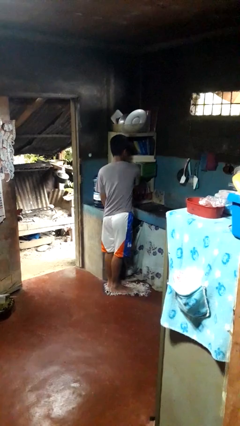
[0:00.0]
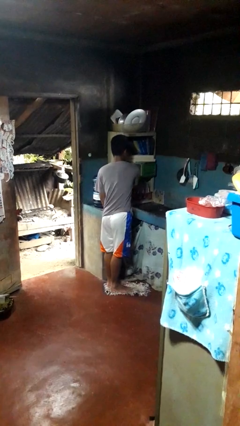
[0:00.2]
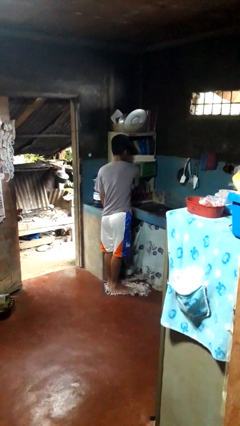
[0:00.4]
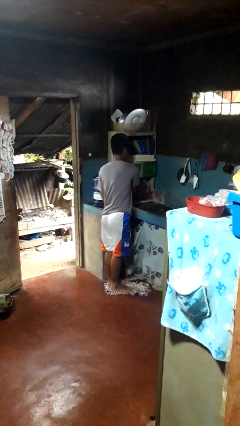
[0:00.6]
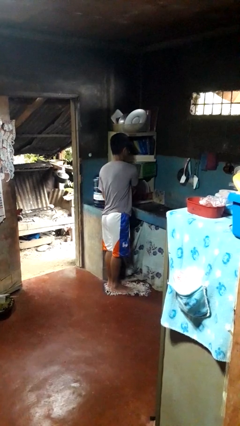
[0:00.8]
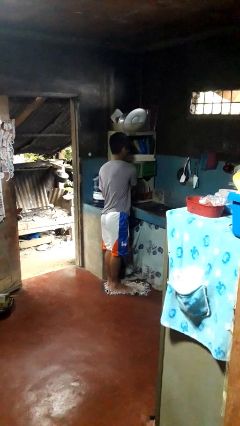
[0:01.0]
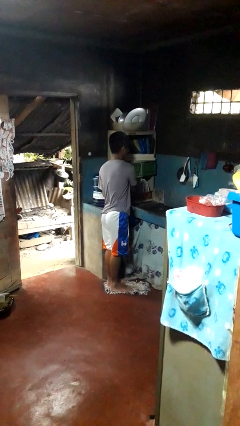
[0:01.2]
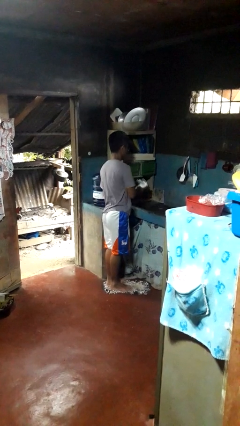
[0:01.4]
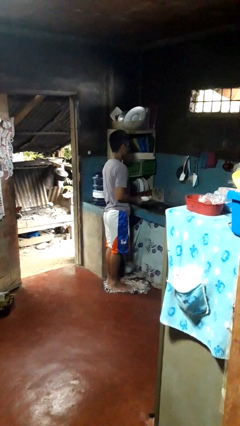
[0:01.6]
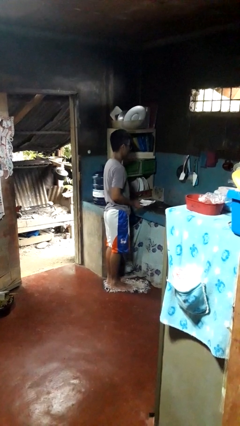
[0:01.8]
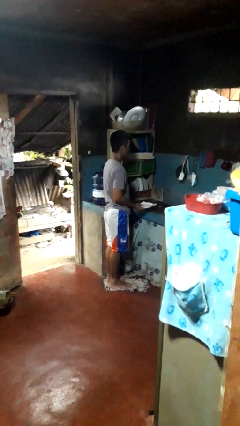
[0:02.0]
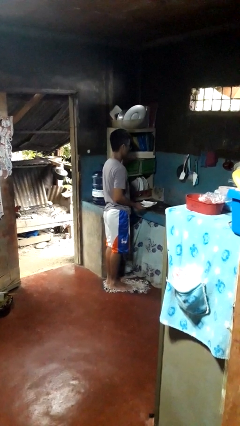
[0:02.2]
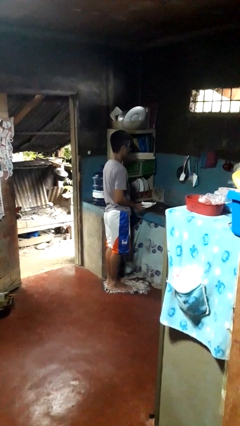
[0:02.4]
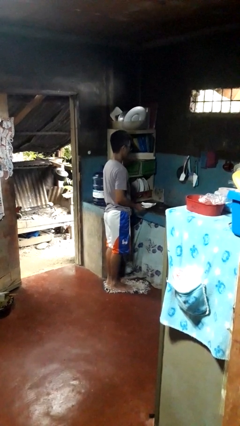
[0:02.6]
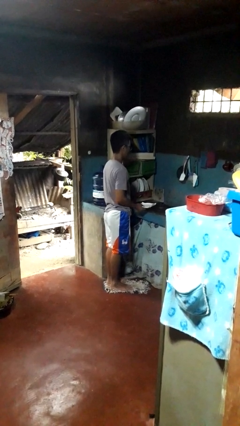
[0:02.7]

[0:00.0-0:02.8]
person unloads dishwasher

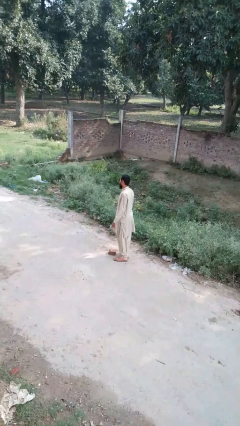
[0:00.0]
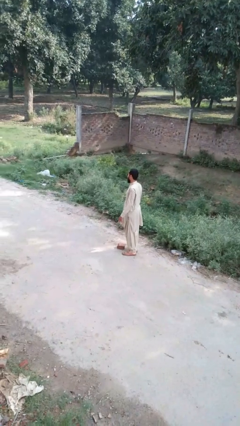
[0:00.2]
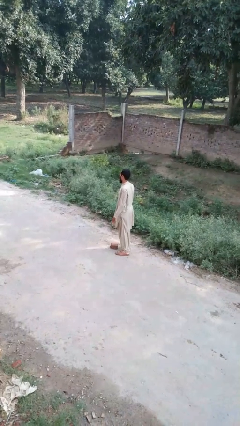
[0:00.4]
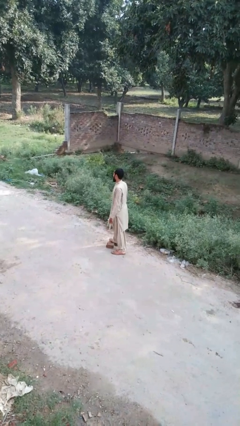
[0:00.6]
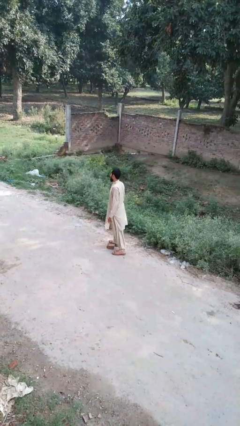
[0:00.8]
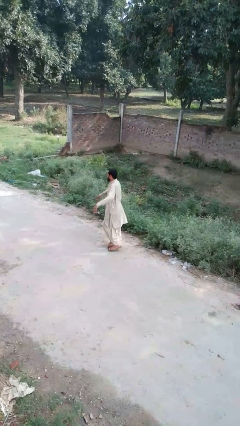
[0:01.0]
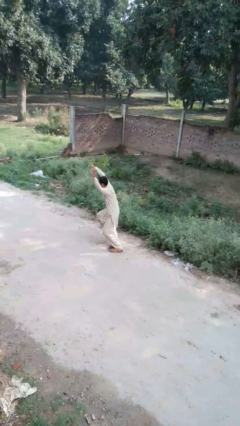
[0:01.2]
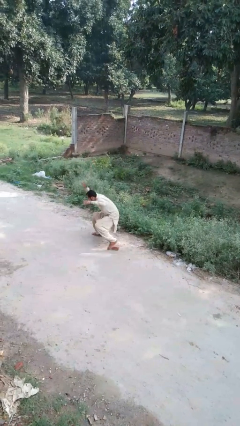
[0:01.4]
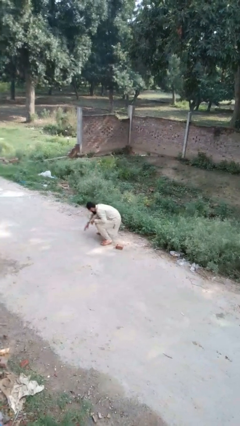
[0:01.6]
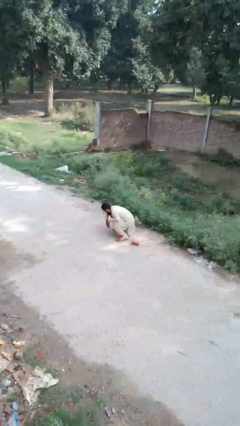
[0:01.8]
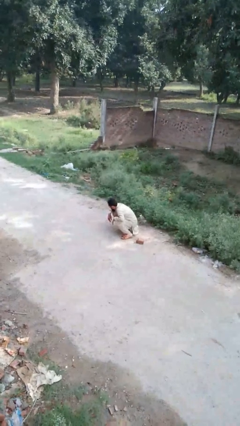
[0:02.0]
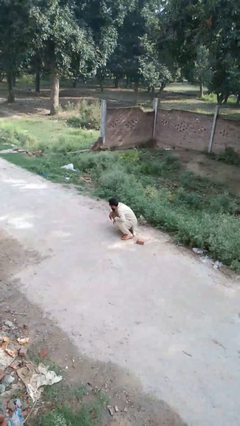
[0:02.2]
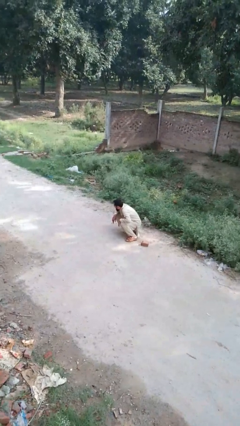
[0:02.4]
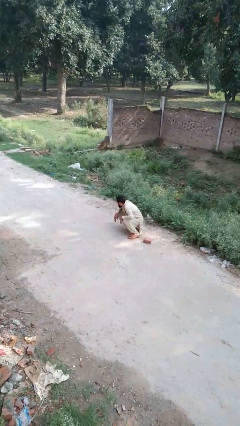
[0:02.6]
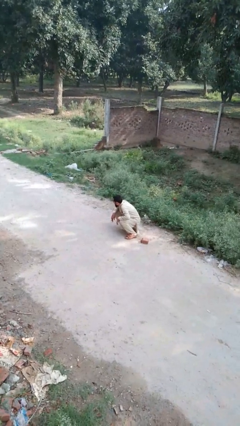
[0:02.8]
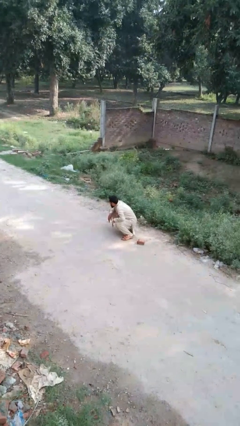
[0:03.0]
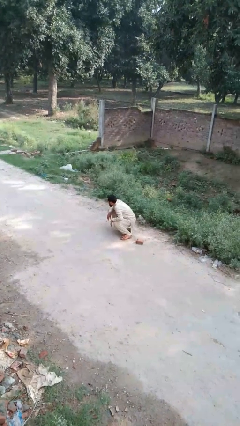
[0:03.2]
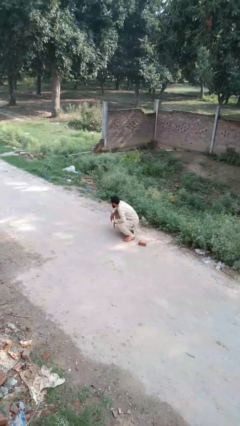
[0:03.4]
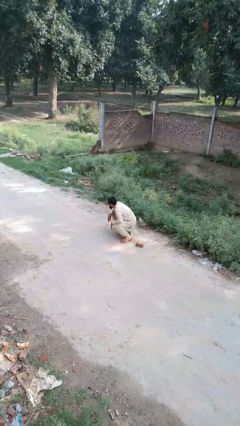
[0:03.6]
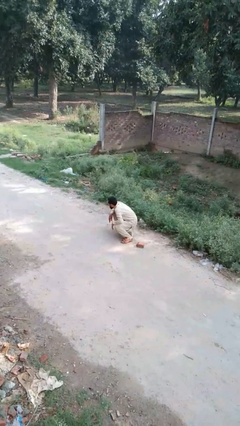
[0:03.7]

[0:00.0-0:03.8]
person trips on object on floor

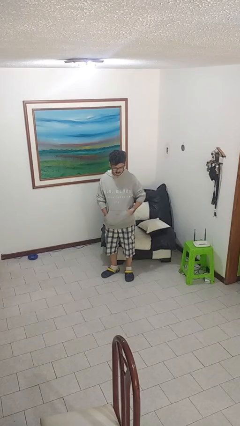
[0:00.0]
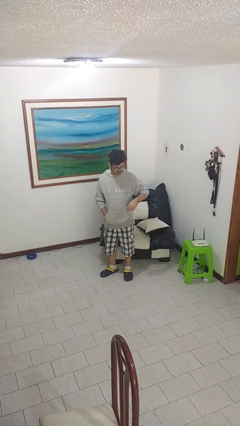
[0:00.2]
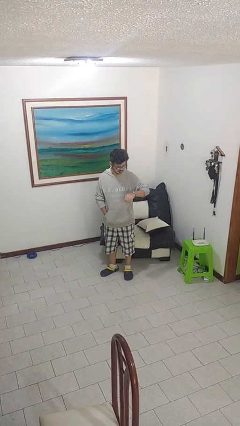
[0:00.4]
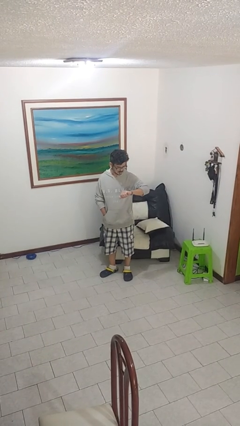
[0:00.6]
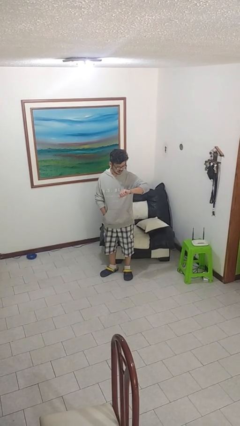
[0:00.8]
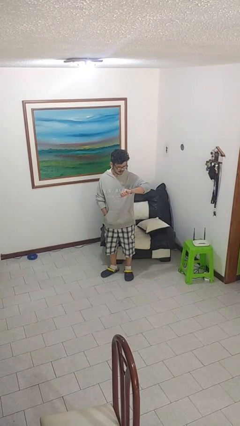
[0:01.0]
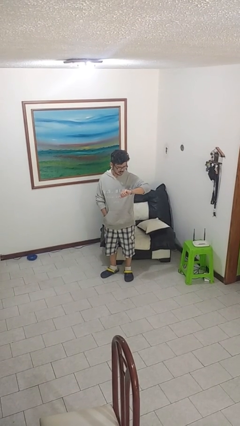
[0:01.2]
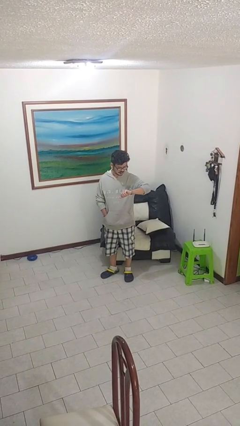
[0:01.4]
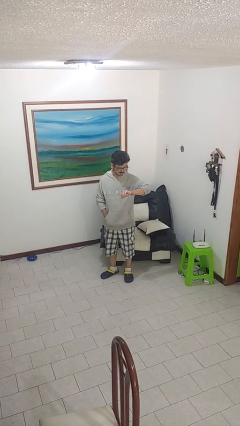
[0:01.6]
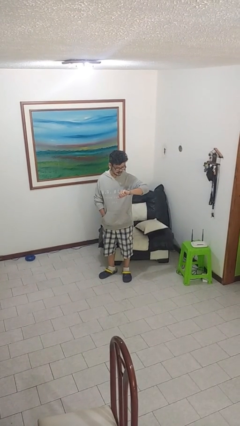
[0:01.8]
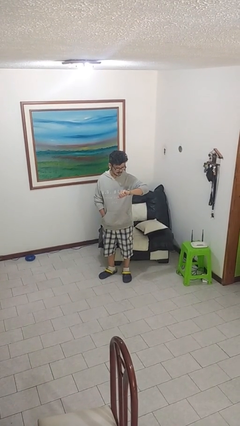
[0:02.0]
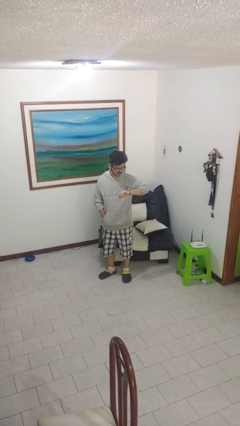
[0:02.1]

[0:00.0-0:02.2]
person looks at wristwatch

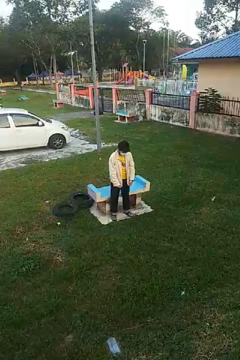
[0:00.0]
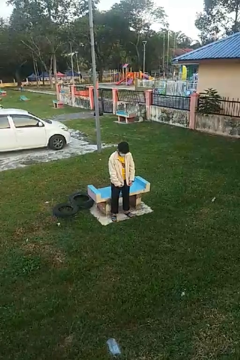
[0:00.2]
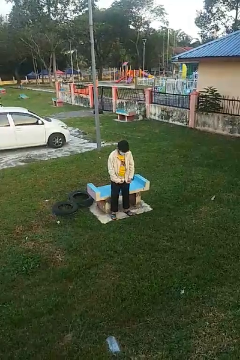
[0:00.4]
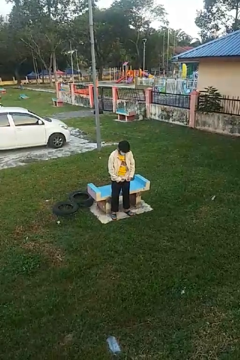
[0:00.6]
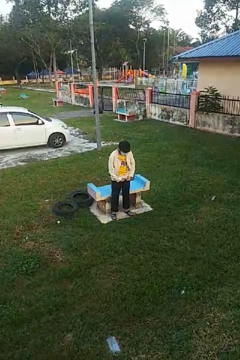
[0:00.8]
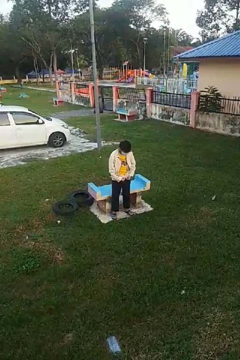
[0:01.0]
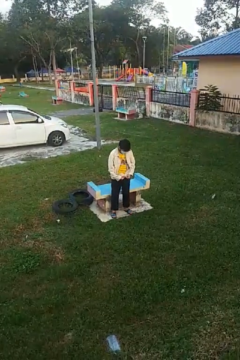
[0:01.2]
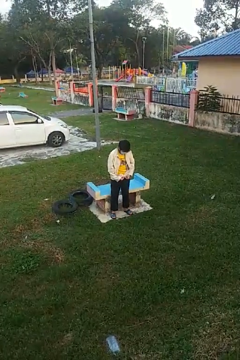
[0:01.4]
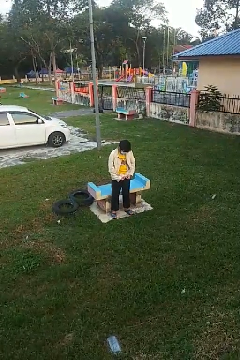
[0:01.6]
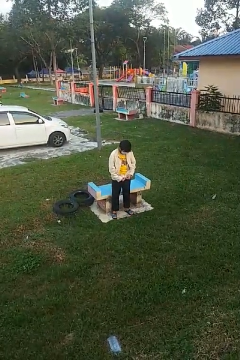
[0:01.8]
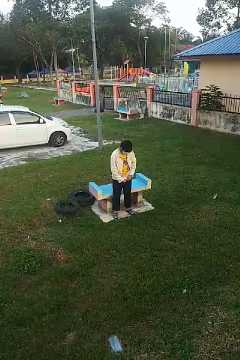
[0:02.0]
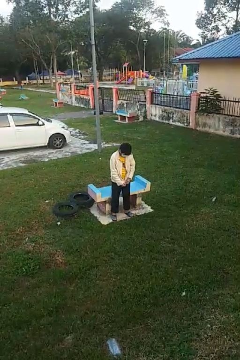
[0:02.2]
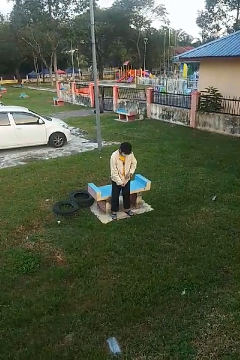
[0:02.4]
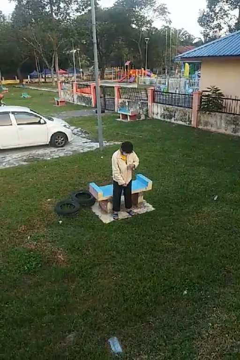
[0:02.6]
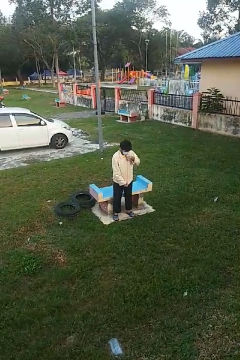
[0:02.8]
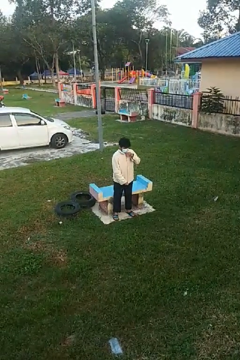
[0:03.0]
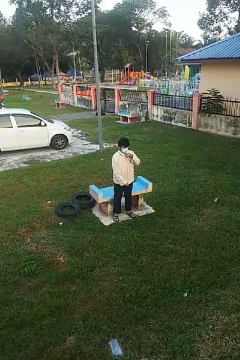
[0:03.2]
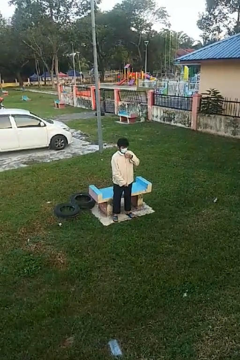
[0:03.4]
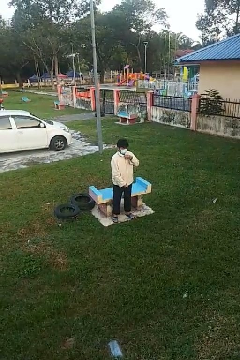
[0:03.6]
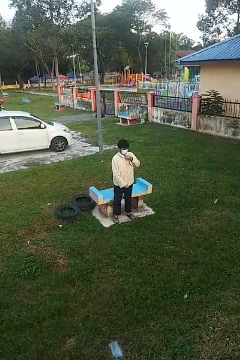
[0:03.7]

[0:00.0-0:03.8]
person zips up jacket

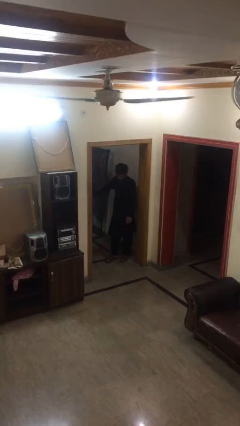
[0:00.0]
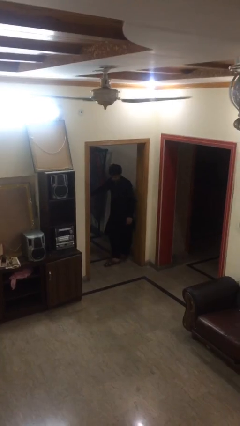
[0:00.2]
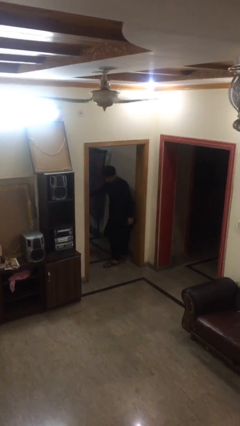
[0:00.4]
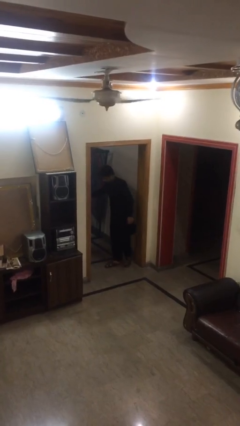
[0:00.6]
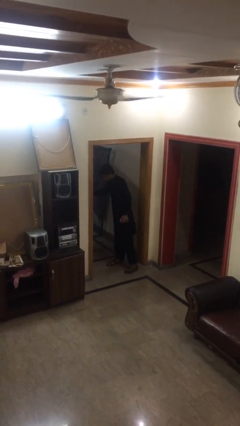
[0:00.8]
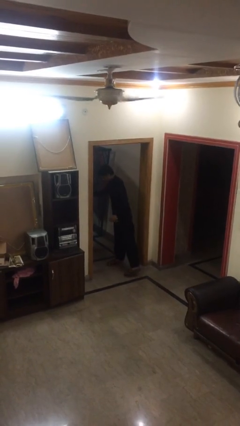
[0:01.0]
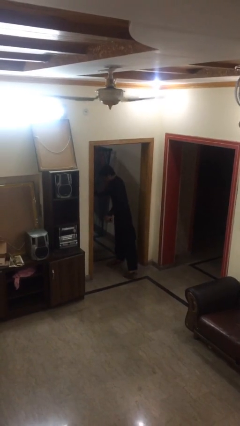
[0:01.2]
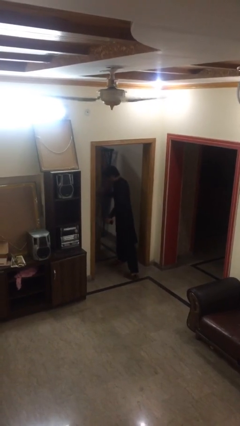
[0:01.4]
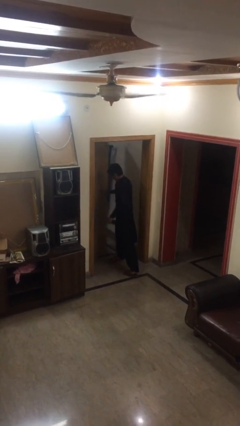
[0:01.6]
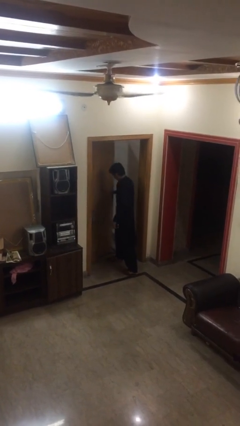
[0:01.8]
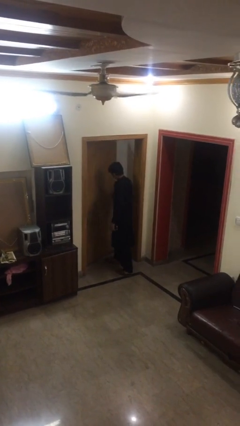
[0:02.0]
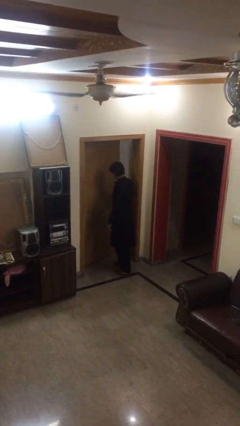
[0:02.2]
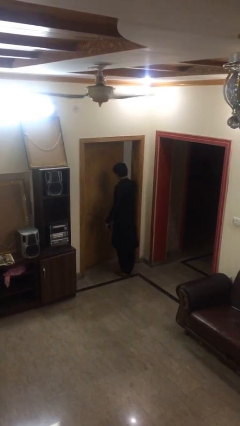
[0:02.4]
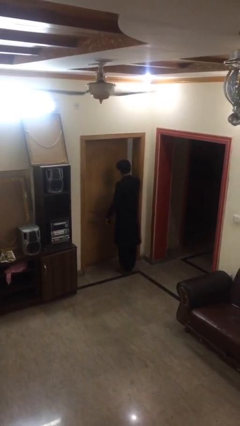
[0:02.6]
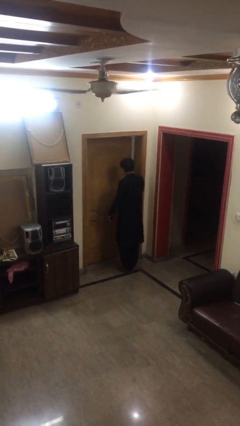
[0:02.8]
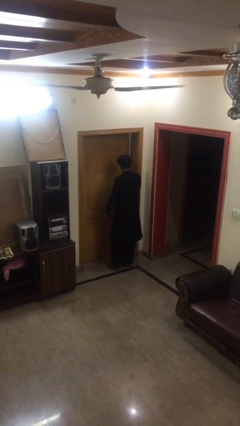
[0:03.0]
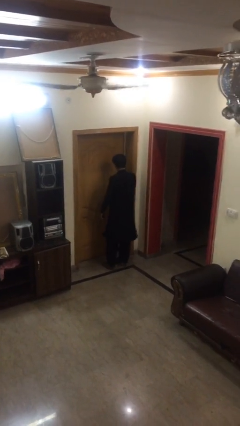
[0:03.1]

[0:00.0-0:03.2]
person enters scene through structure

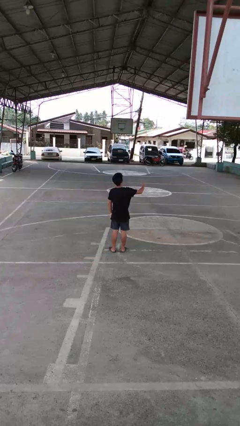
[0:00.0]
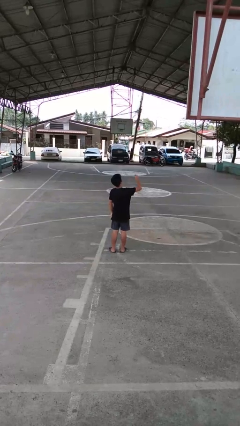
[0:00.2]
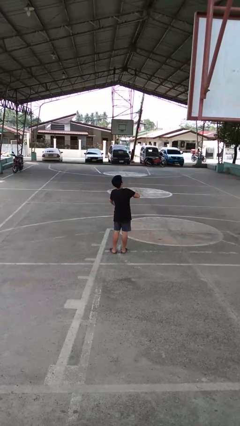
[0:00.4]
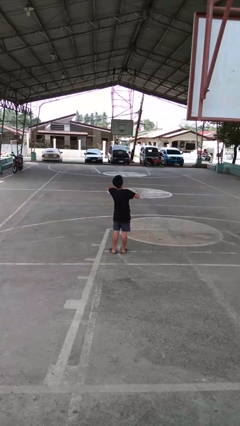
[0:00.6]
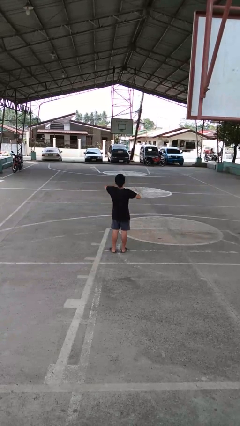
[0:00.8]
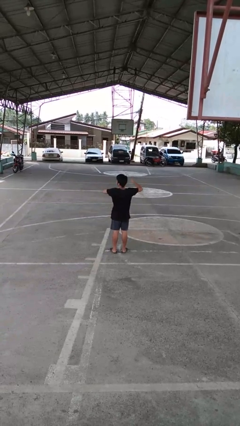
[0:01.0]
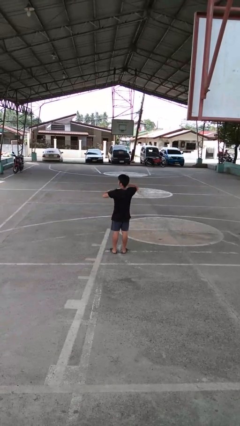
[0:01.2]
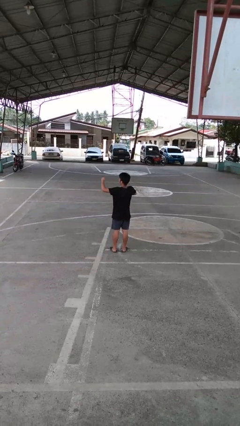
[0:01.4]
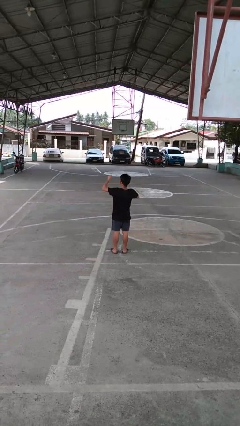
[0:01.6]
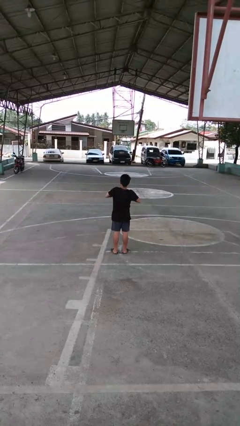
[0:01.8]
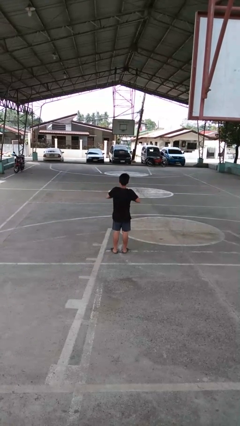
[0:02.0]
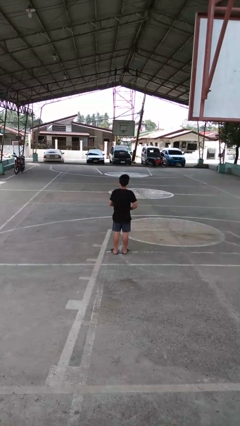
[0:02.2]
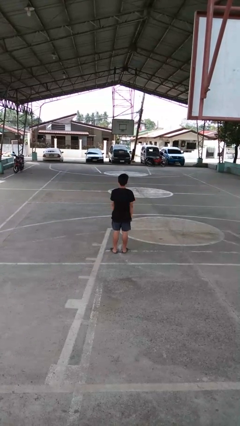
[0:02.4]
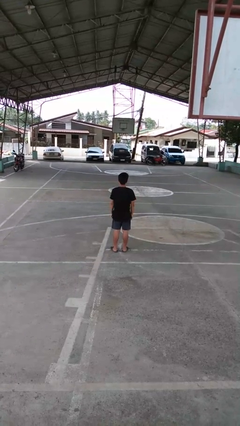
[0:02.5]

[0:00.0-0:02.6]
person drums on chest
